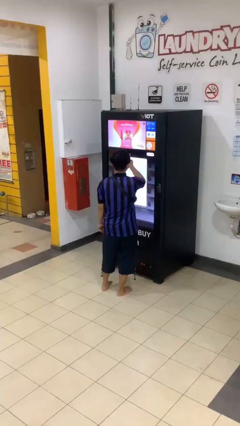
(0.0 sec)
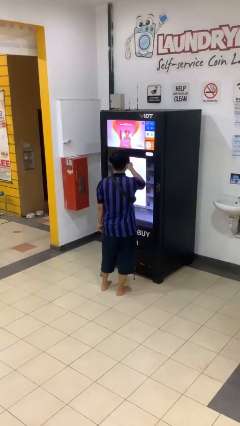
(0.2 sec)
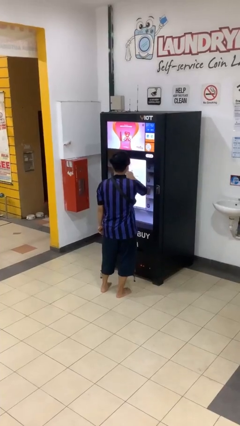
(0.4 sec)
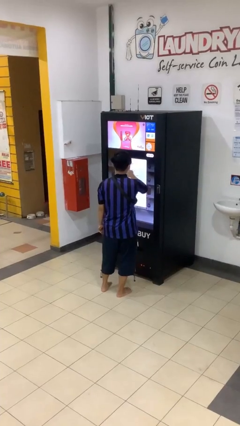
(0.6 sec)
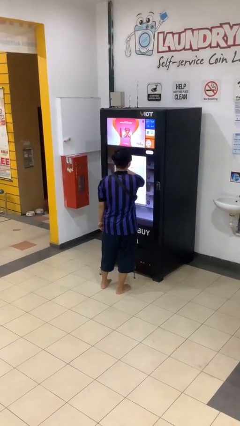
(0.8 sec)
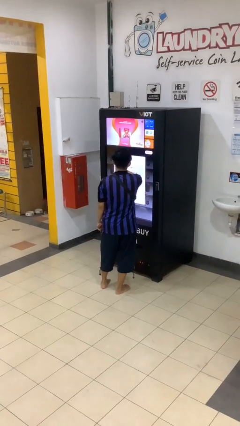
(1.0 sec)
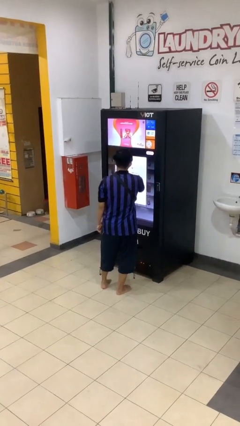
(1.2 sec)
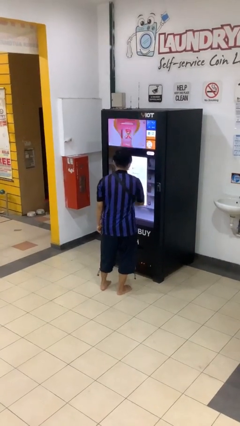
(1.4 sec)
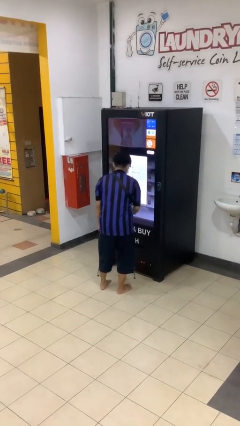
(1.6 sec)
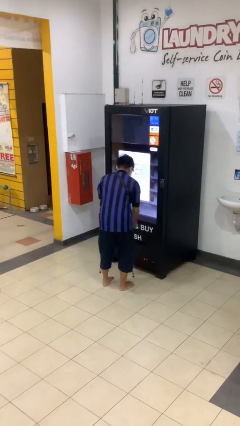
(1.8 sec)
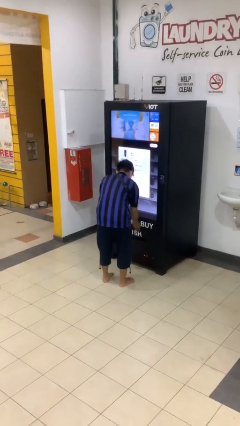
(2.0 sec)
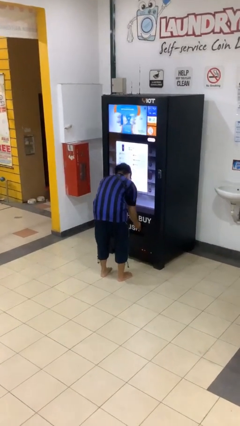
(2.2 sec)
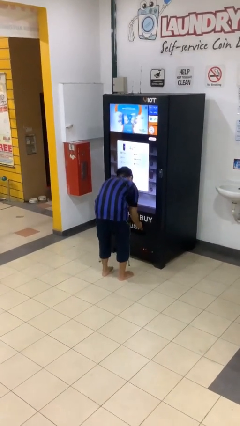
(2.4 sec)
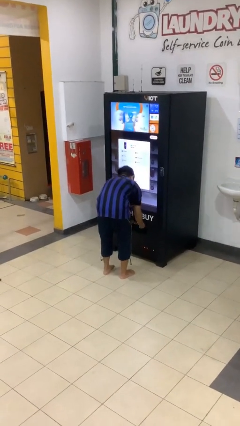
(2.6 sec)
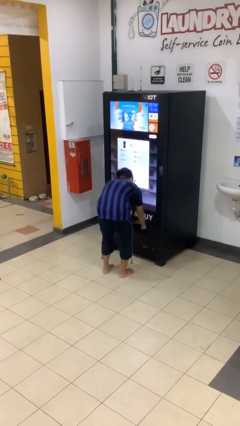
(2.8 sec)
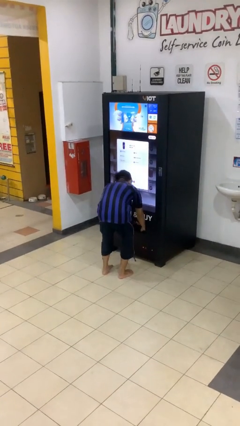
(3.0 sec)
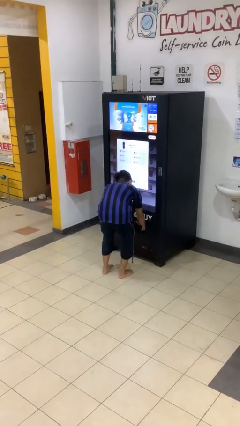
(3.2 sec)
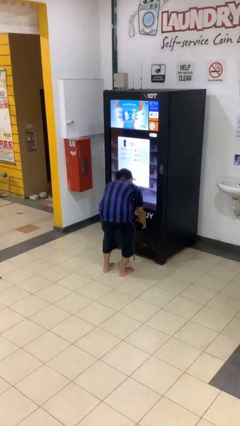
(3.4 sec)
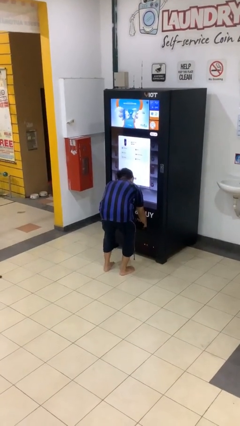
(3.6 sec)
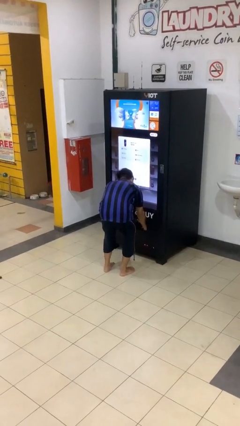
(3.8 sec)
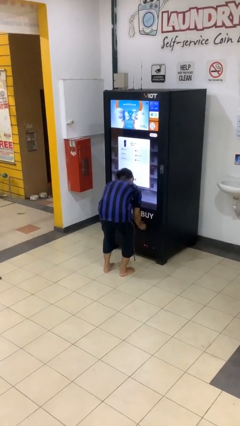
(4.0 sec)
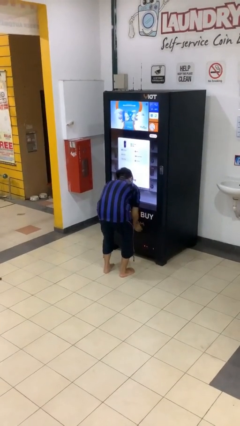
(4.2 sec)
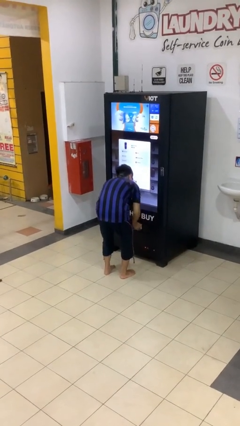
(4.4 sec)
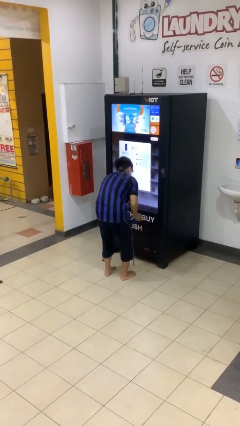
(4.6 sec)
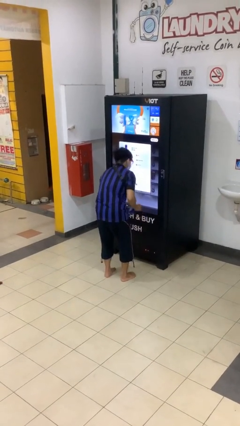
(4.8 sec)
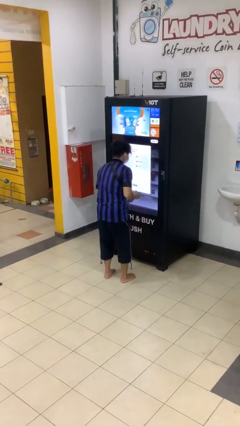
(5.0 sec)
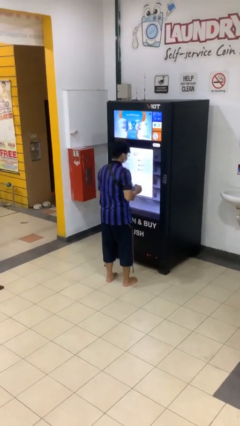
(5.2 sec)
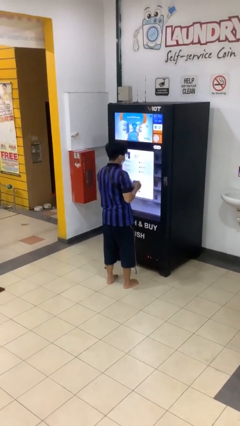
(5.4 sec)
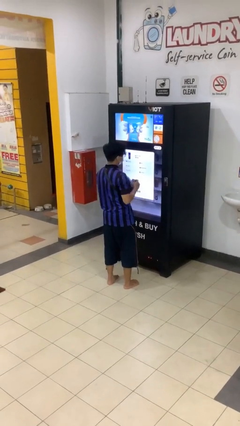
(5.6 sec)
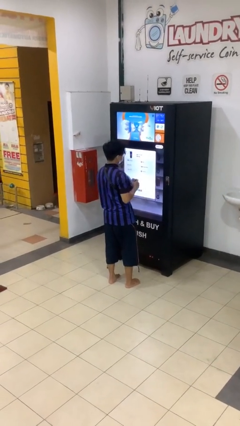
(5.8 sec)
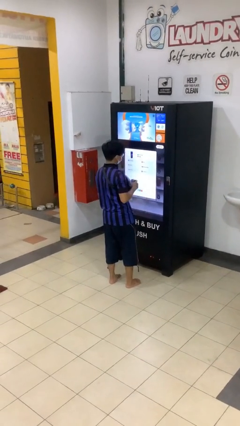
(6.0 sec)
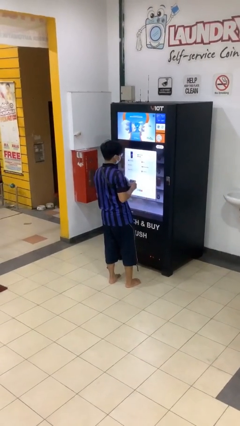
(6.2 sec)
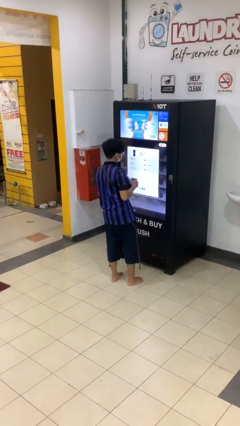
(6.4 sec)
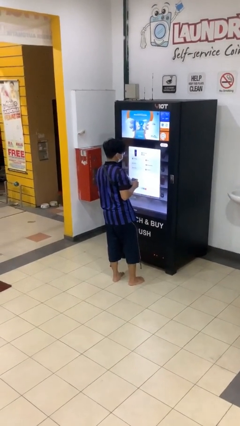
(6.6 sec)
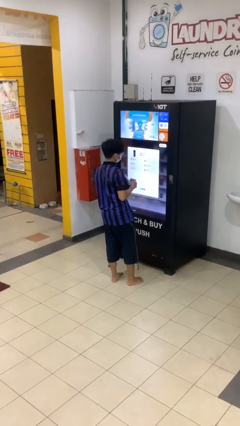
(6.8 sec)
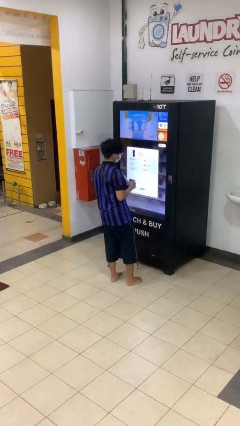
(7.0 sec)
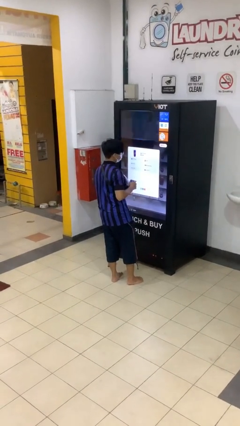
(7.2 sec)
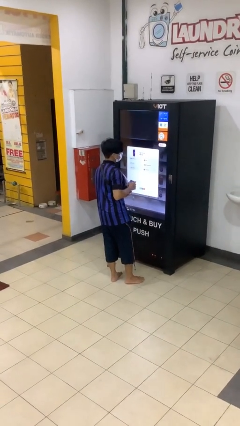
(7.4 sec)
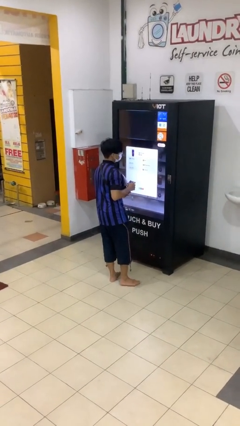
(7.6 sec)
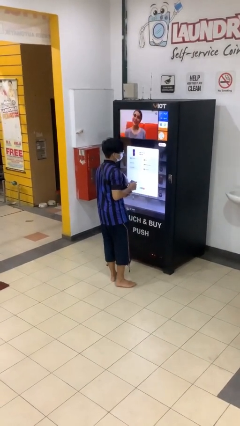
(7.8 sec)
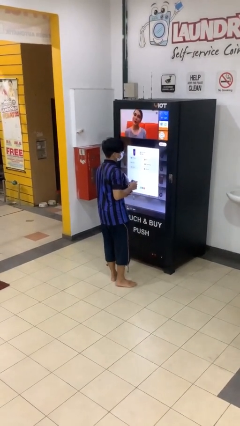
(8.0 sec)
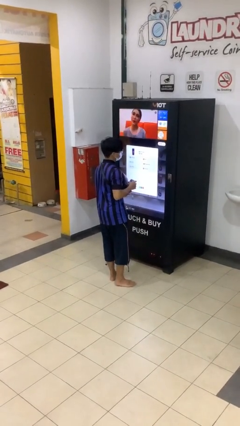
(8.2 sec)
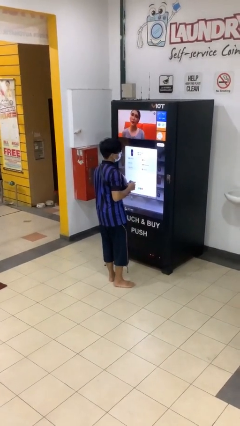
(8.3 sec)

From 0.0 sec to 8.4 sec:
person purchases from machine

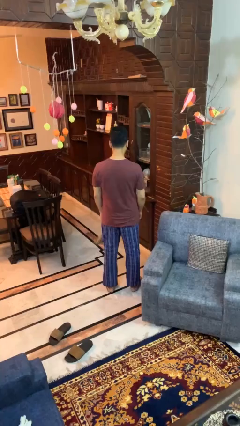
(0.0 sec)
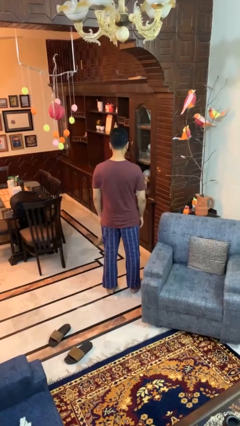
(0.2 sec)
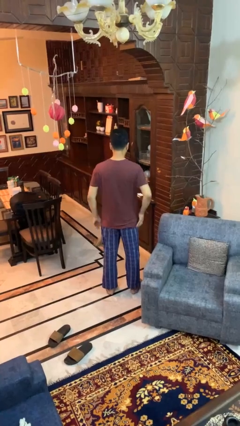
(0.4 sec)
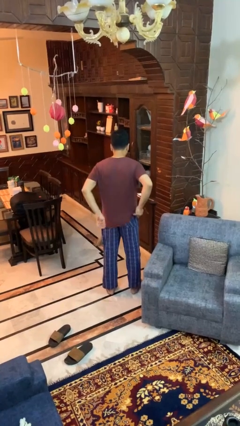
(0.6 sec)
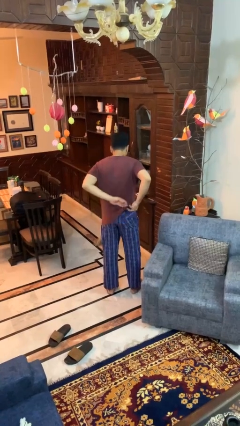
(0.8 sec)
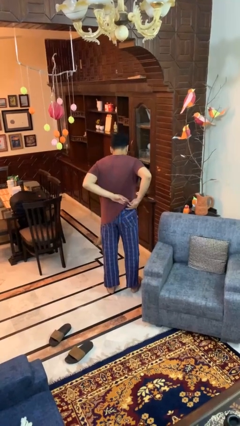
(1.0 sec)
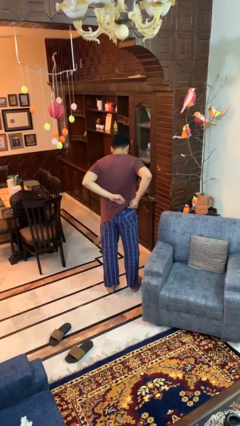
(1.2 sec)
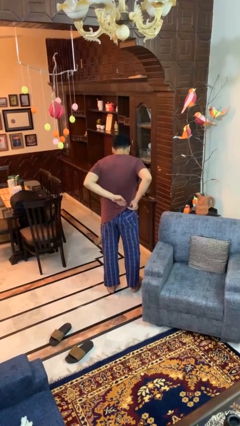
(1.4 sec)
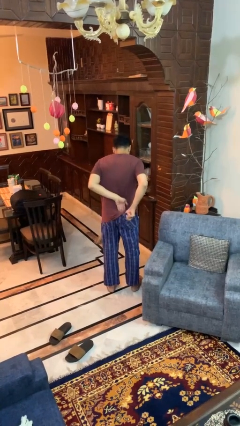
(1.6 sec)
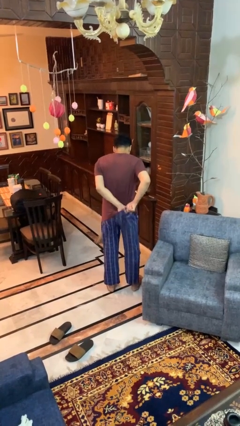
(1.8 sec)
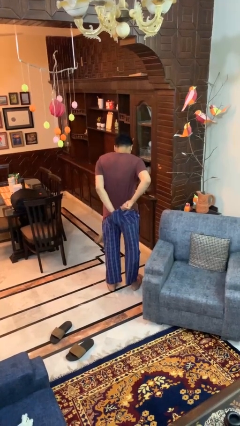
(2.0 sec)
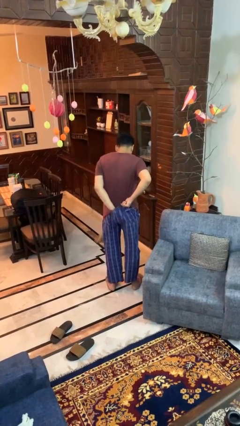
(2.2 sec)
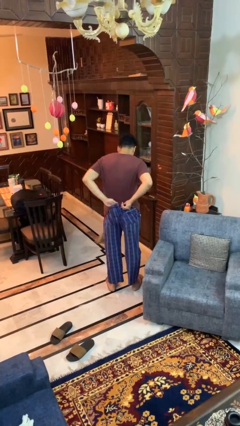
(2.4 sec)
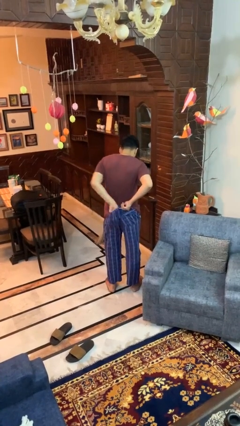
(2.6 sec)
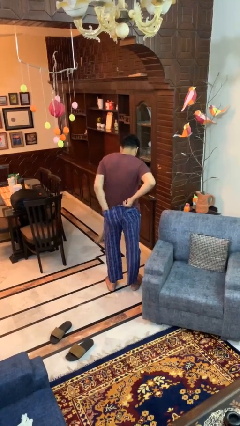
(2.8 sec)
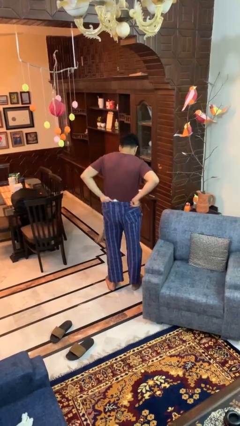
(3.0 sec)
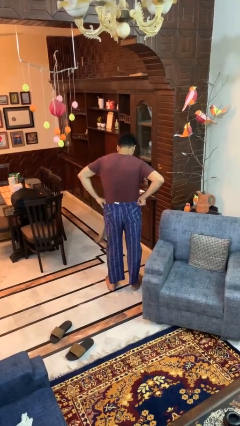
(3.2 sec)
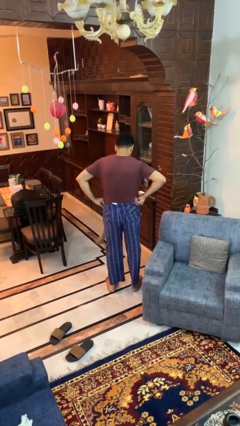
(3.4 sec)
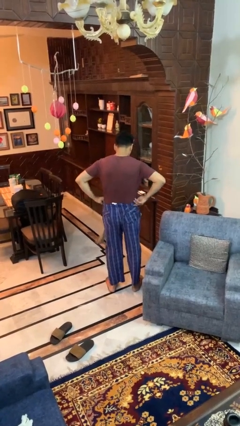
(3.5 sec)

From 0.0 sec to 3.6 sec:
person tucks in shirt

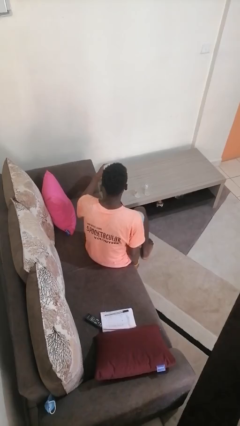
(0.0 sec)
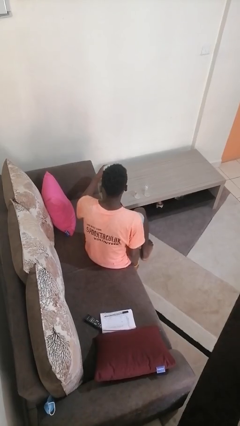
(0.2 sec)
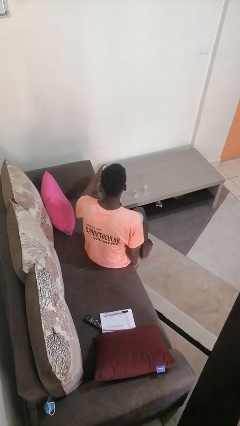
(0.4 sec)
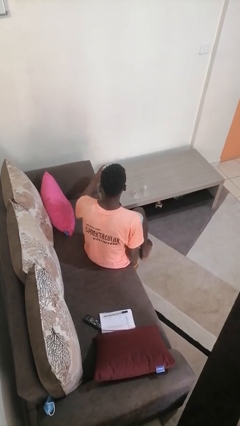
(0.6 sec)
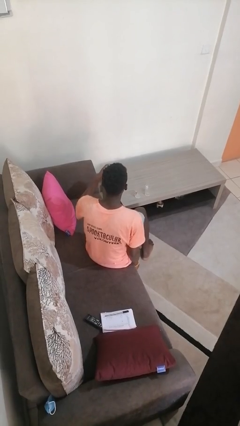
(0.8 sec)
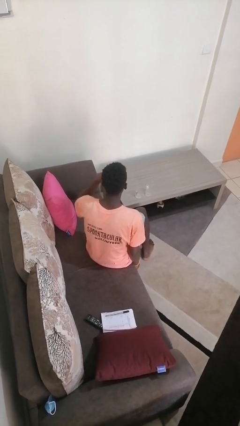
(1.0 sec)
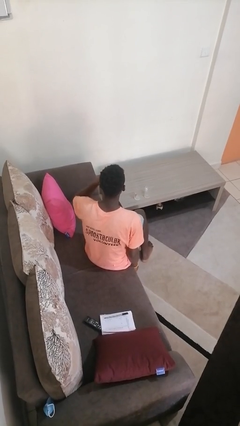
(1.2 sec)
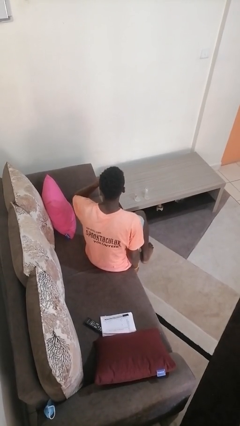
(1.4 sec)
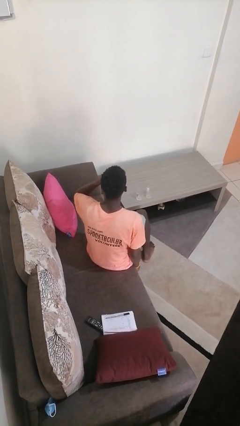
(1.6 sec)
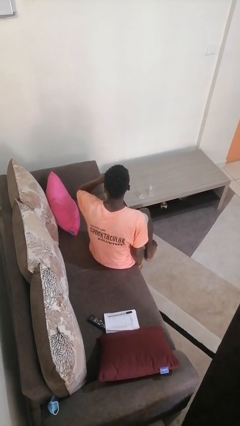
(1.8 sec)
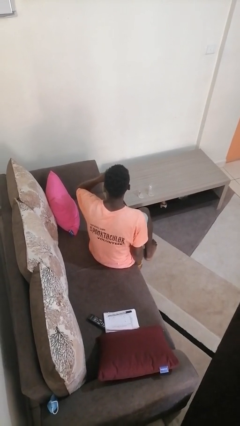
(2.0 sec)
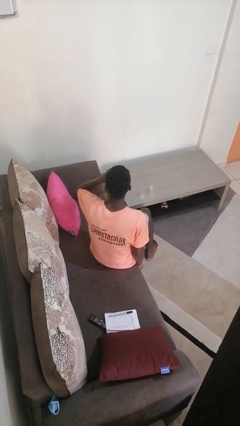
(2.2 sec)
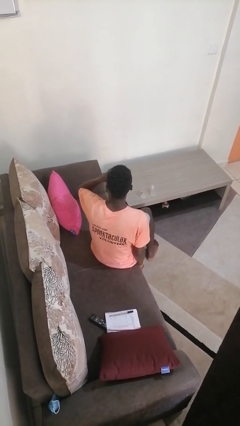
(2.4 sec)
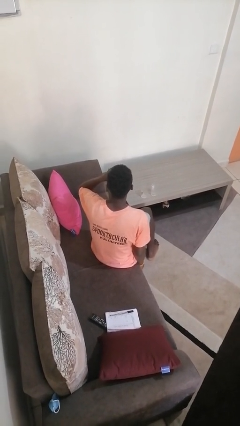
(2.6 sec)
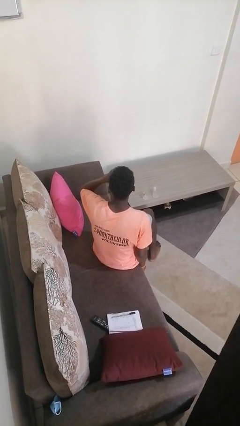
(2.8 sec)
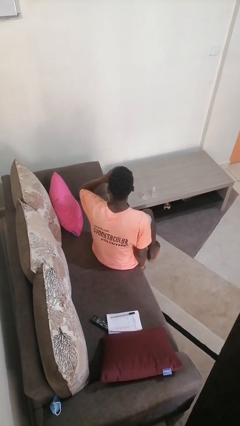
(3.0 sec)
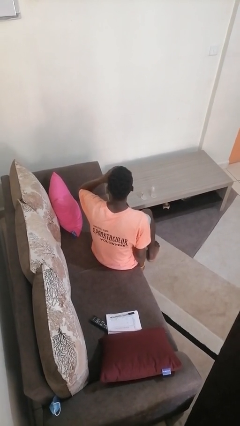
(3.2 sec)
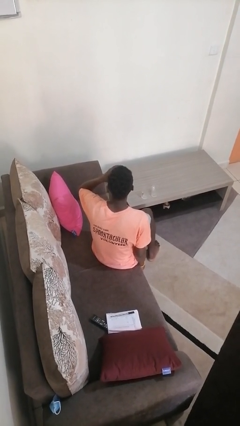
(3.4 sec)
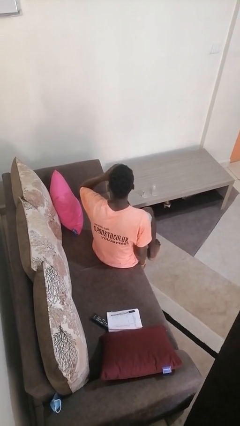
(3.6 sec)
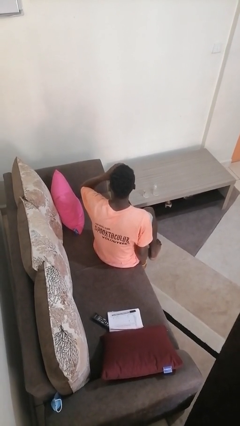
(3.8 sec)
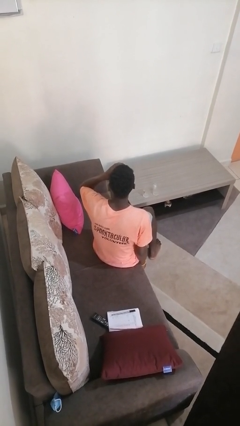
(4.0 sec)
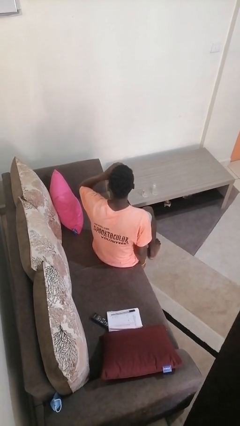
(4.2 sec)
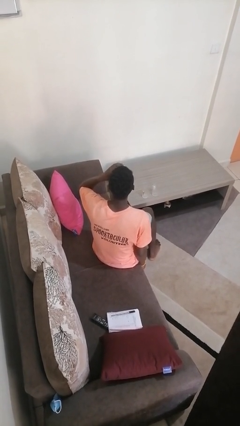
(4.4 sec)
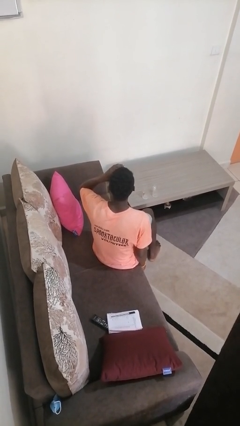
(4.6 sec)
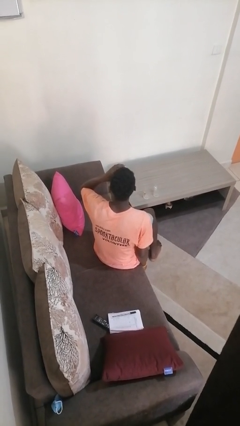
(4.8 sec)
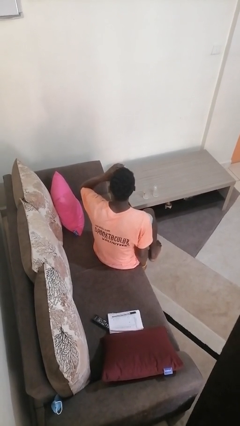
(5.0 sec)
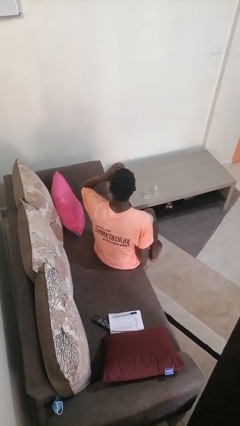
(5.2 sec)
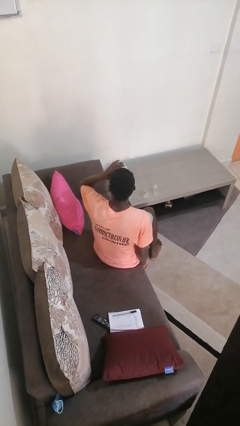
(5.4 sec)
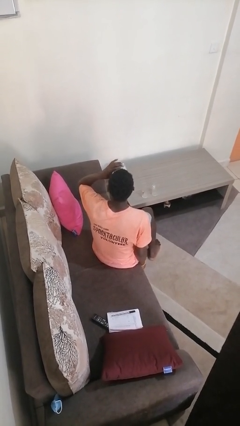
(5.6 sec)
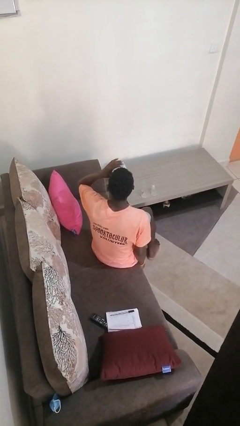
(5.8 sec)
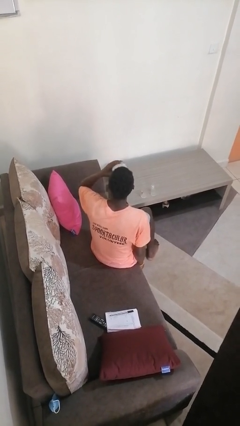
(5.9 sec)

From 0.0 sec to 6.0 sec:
person drinks from shotglass
